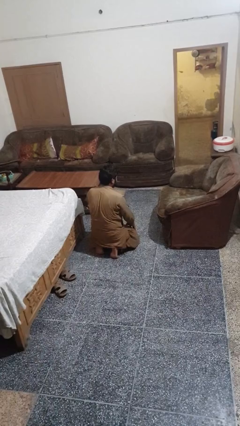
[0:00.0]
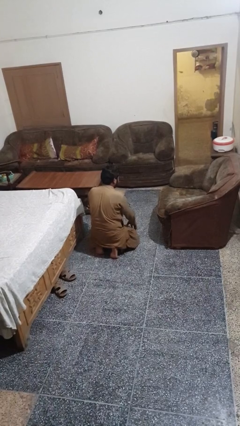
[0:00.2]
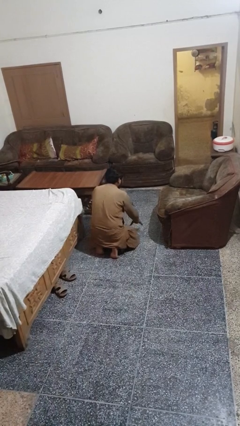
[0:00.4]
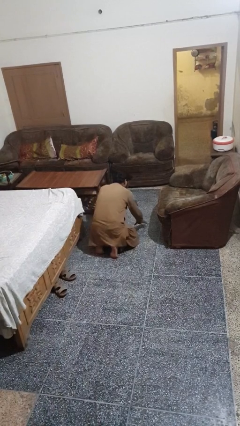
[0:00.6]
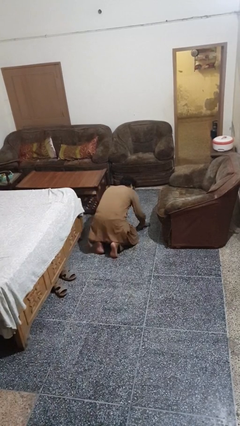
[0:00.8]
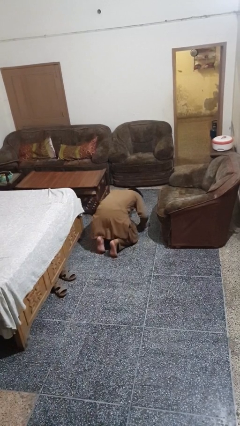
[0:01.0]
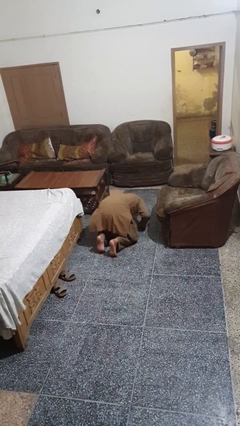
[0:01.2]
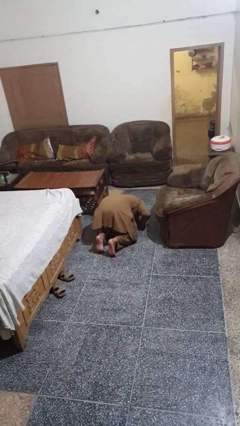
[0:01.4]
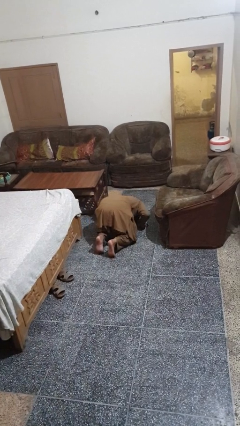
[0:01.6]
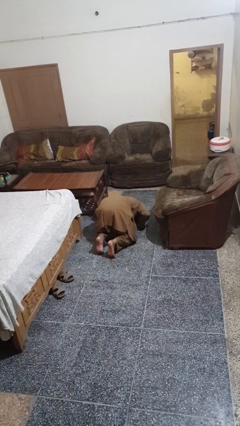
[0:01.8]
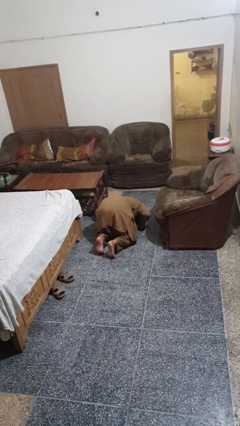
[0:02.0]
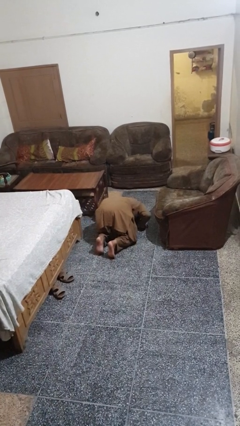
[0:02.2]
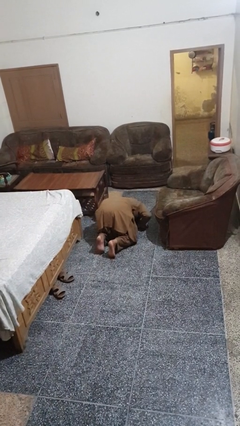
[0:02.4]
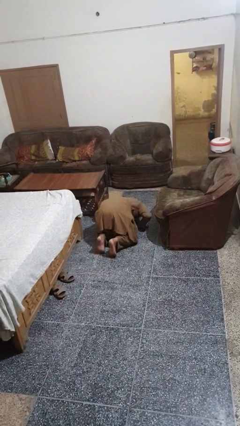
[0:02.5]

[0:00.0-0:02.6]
person searches under couch

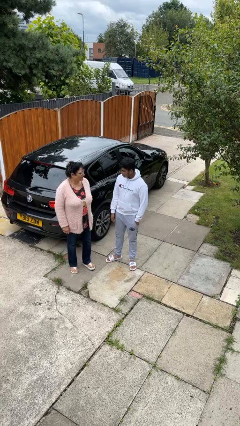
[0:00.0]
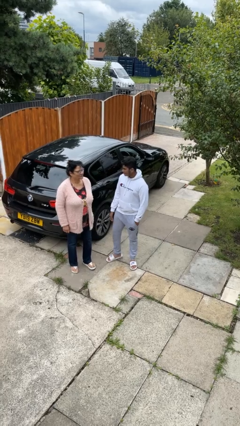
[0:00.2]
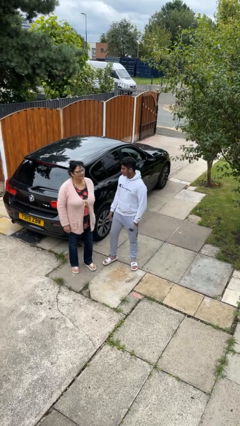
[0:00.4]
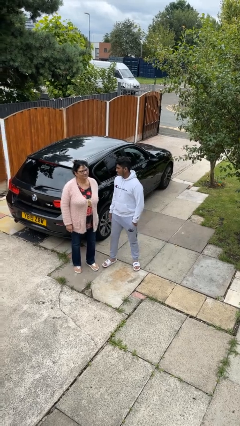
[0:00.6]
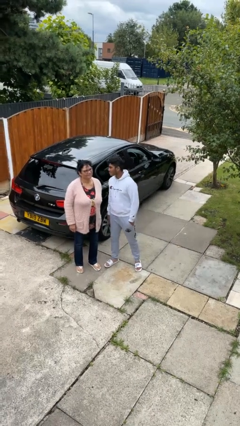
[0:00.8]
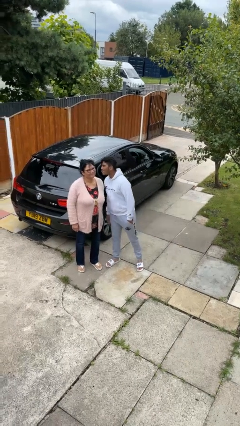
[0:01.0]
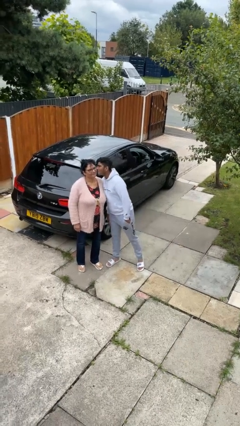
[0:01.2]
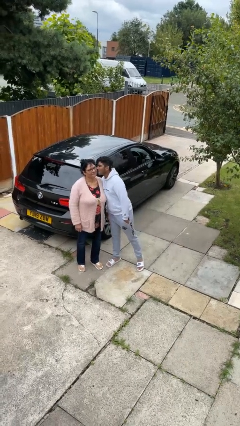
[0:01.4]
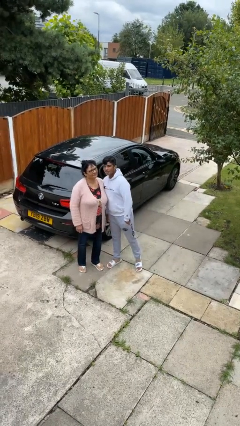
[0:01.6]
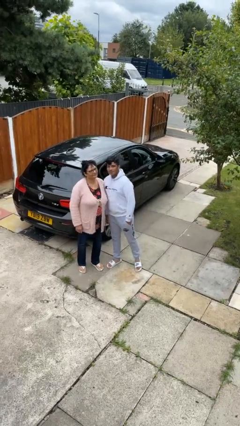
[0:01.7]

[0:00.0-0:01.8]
person kisses cheek of person

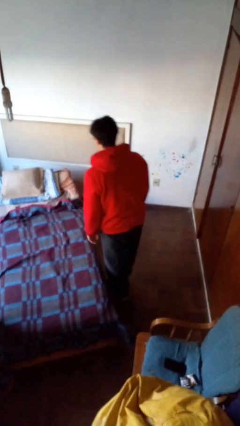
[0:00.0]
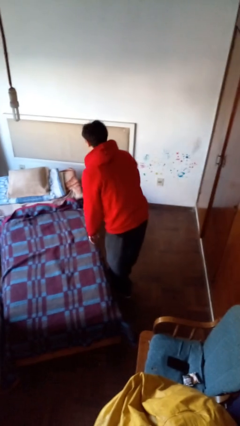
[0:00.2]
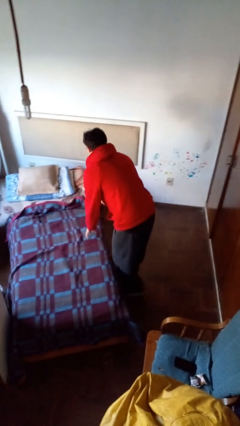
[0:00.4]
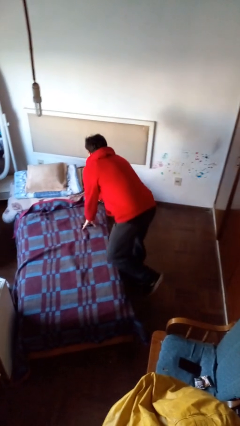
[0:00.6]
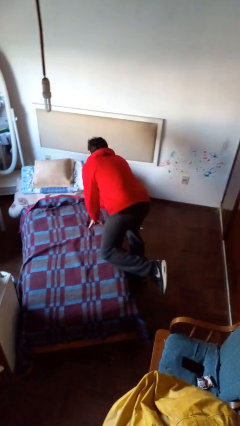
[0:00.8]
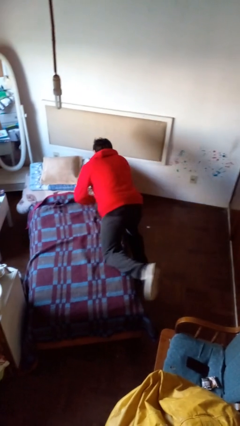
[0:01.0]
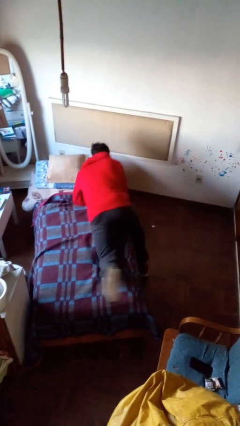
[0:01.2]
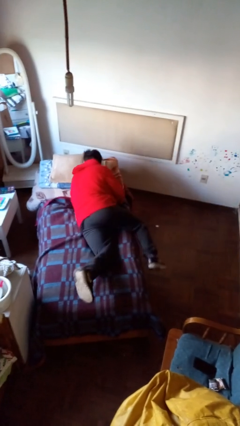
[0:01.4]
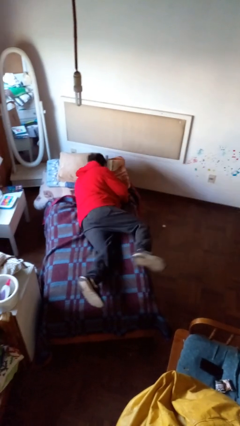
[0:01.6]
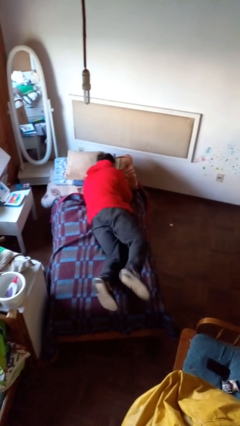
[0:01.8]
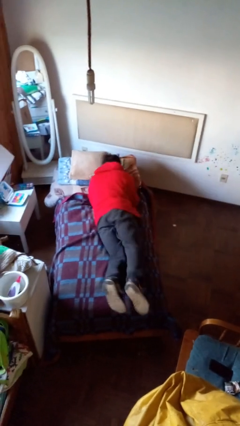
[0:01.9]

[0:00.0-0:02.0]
person lies down on bed

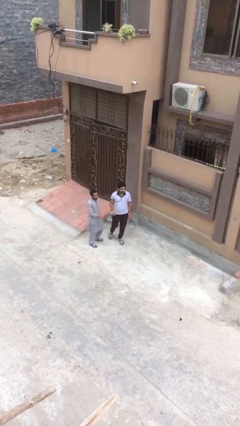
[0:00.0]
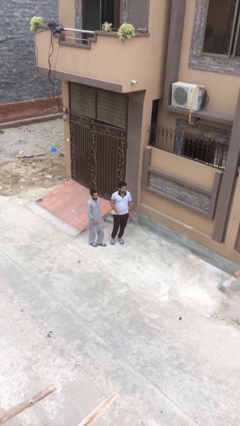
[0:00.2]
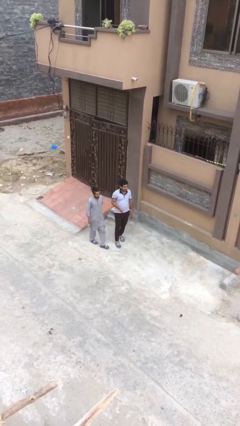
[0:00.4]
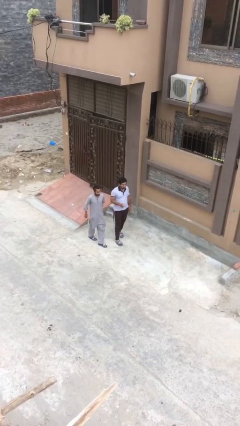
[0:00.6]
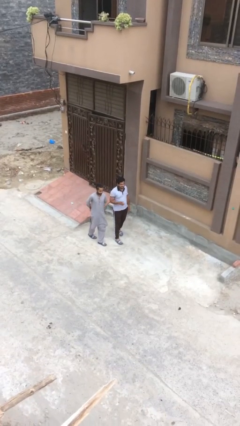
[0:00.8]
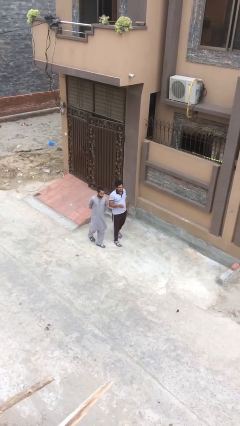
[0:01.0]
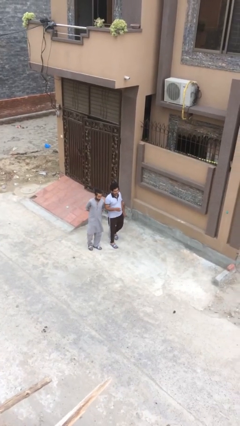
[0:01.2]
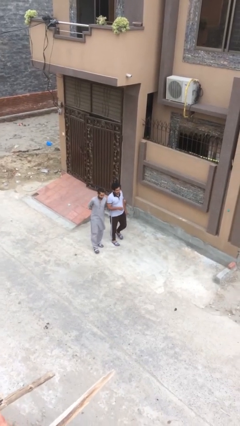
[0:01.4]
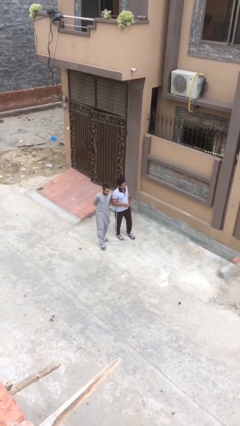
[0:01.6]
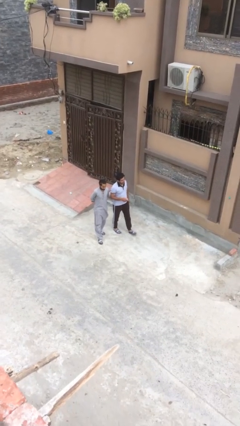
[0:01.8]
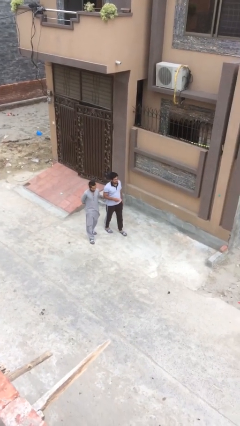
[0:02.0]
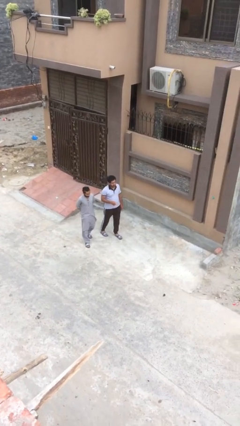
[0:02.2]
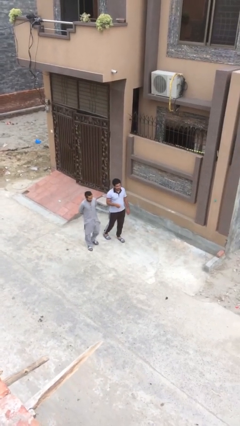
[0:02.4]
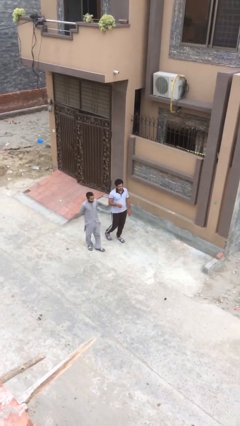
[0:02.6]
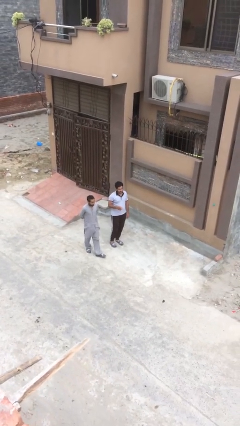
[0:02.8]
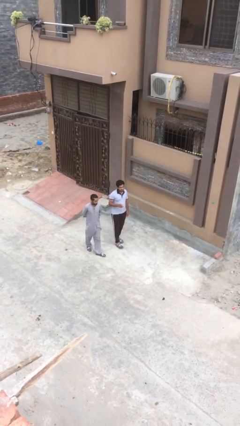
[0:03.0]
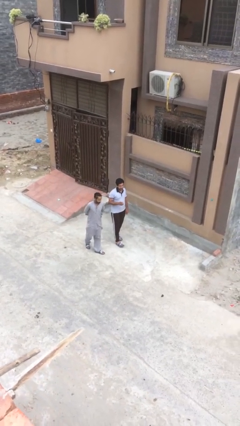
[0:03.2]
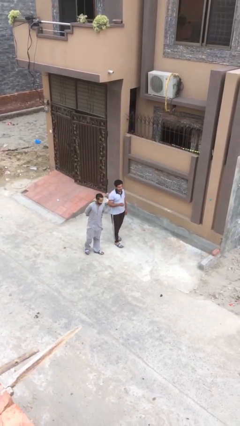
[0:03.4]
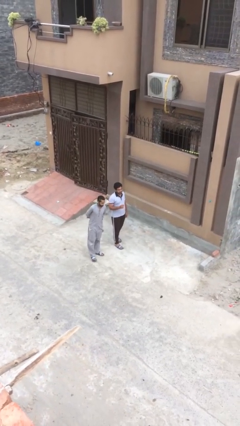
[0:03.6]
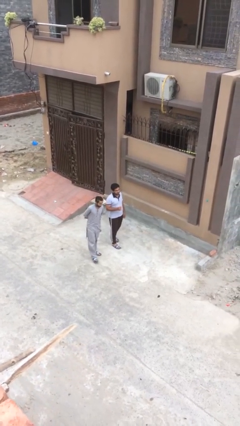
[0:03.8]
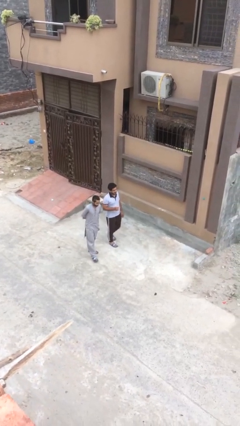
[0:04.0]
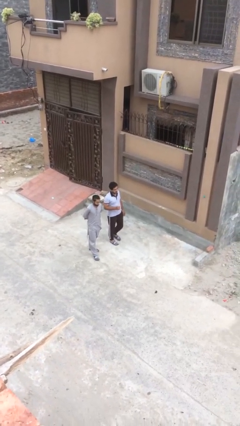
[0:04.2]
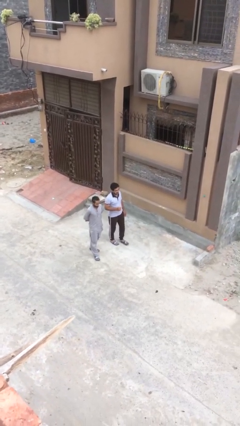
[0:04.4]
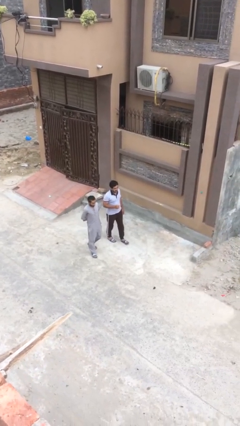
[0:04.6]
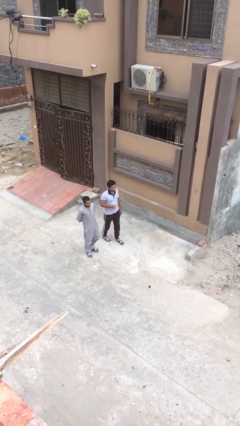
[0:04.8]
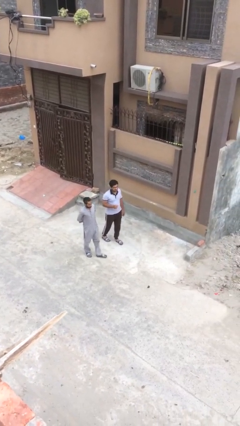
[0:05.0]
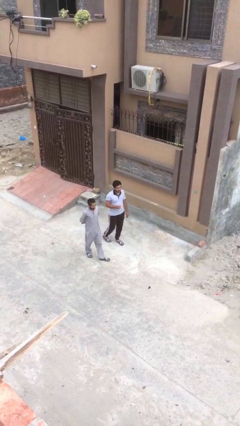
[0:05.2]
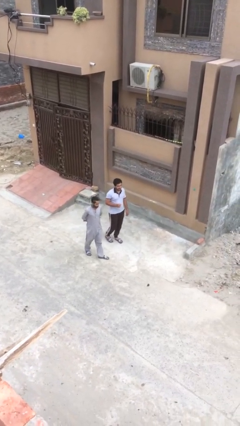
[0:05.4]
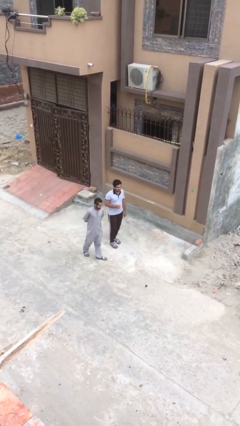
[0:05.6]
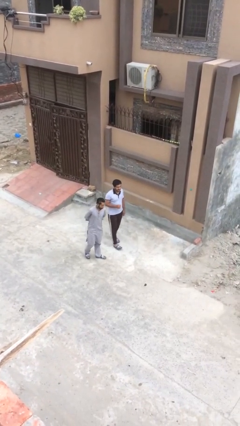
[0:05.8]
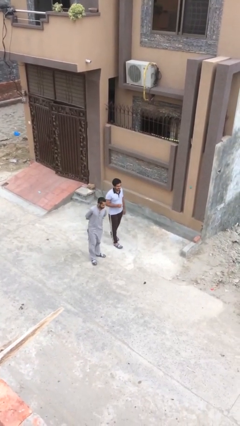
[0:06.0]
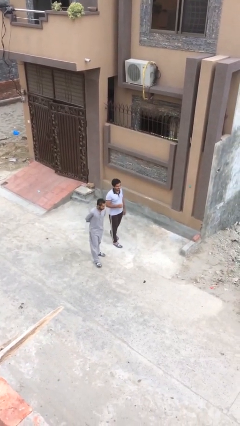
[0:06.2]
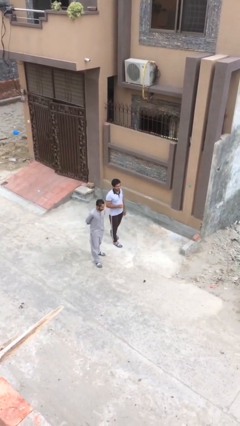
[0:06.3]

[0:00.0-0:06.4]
person talks to person

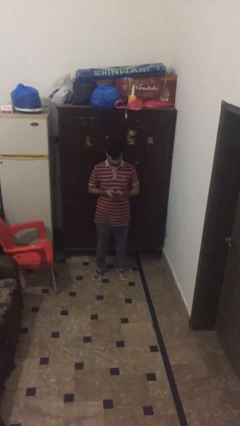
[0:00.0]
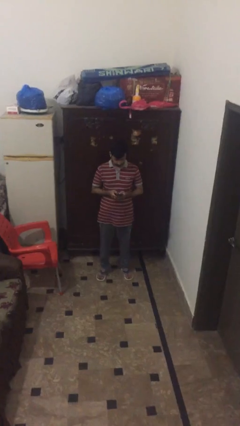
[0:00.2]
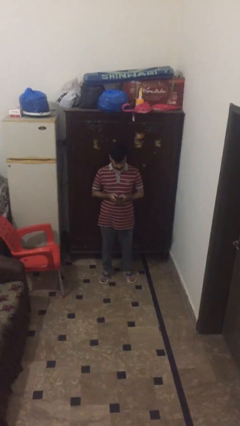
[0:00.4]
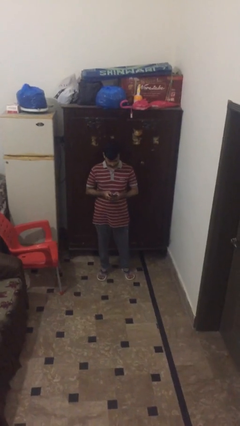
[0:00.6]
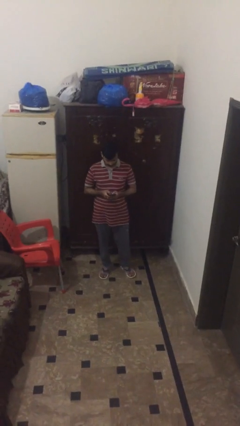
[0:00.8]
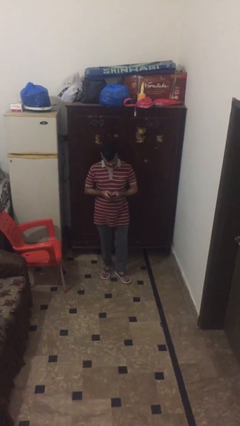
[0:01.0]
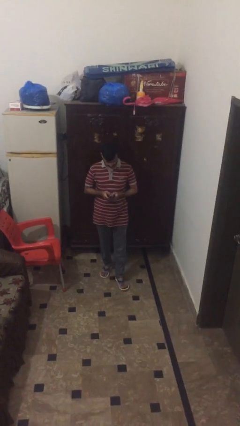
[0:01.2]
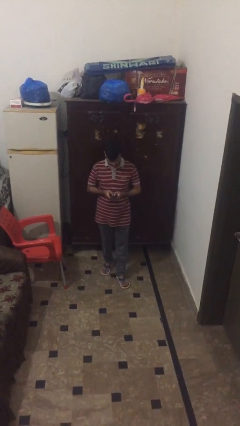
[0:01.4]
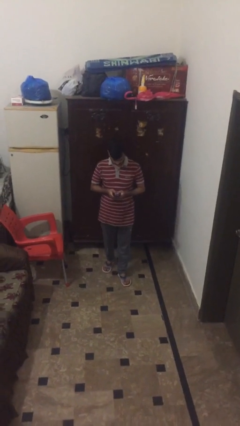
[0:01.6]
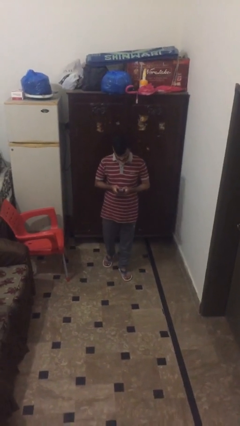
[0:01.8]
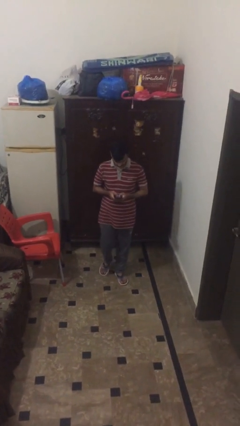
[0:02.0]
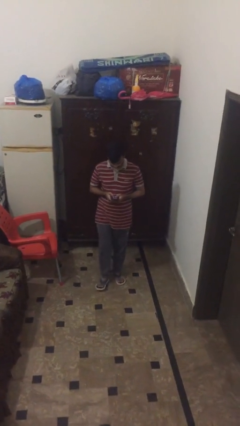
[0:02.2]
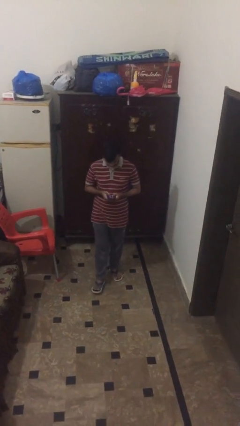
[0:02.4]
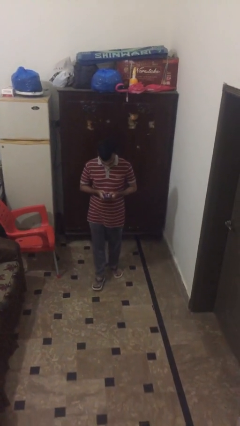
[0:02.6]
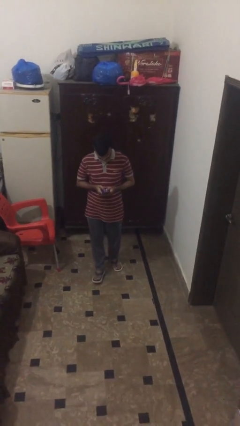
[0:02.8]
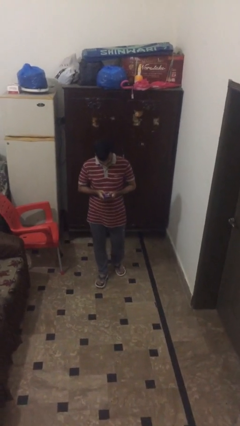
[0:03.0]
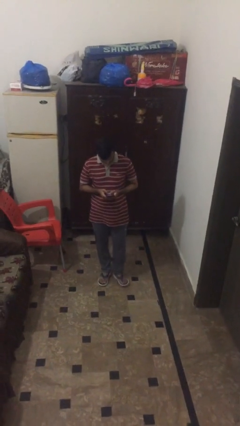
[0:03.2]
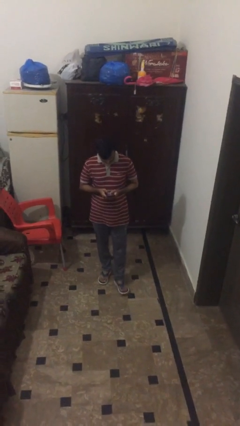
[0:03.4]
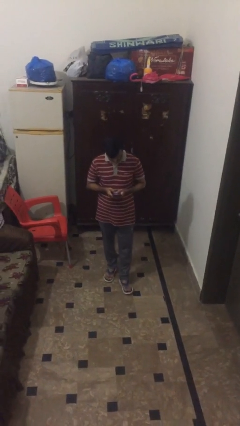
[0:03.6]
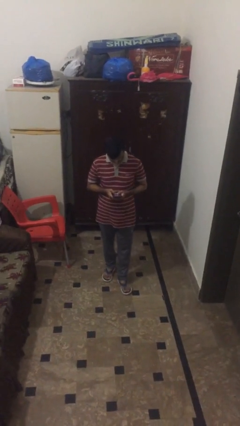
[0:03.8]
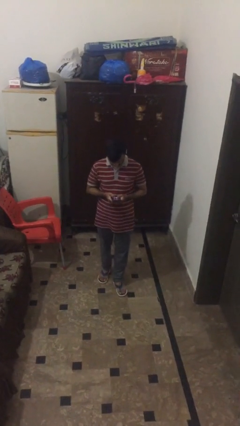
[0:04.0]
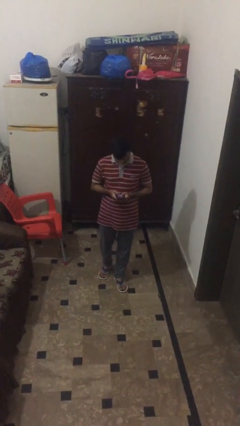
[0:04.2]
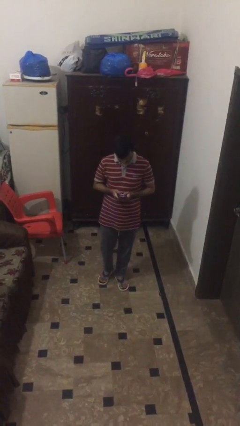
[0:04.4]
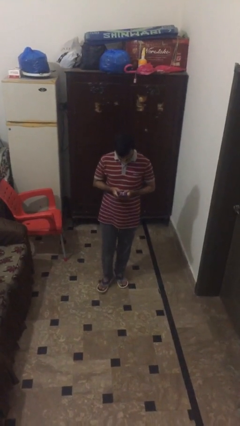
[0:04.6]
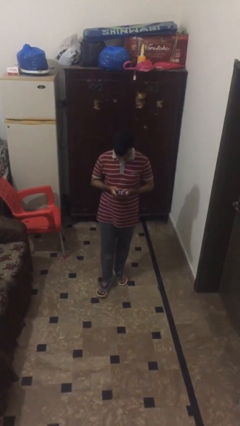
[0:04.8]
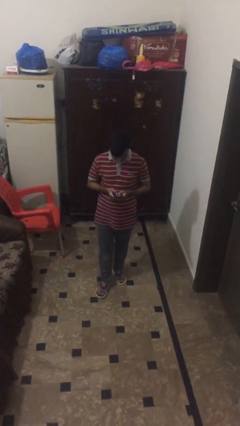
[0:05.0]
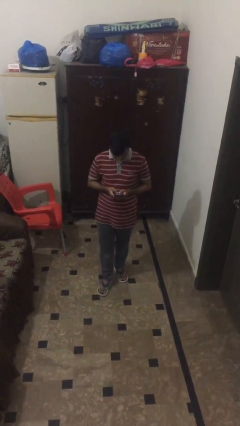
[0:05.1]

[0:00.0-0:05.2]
person texts on phone
